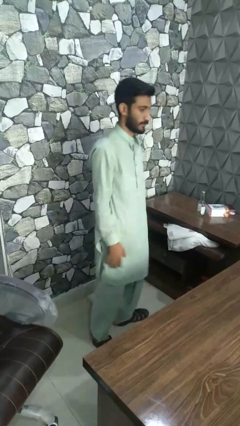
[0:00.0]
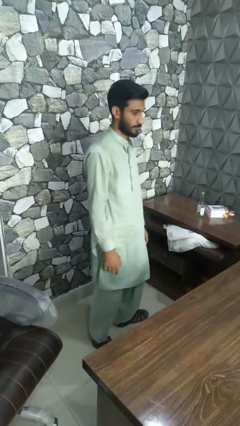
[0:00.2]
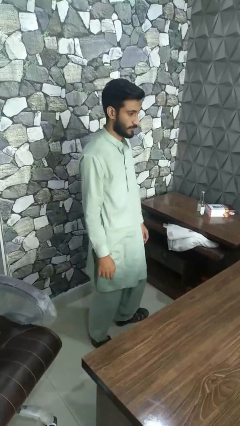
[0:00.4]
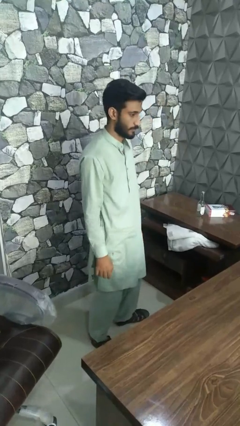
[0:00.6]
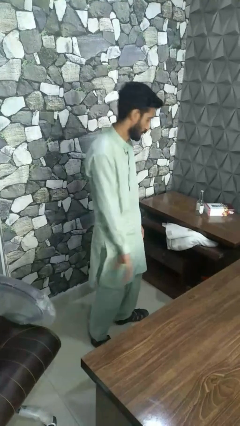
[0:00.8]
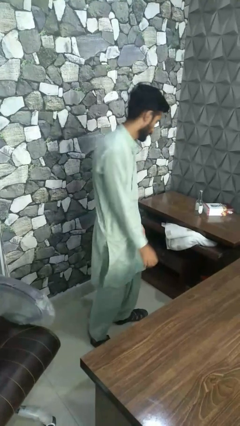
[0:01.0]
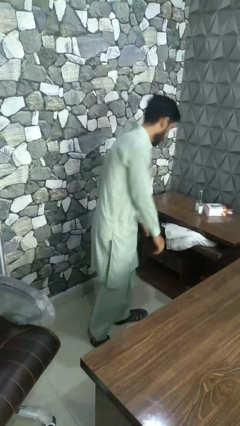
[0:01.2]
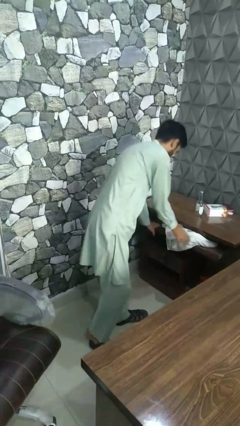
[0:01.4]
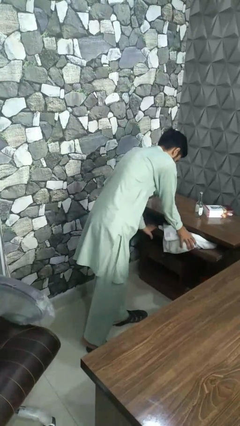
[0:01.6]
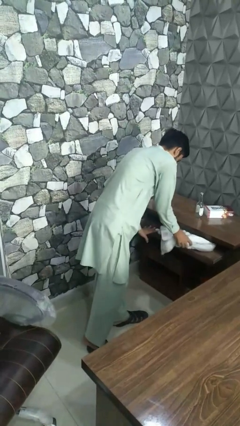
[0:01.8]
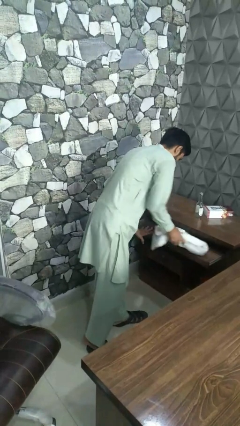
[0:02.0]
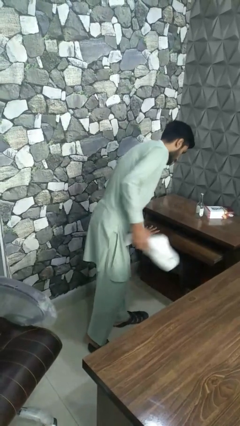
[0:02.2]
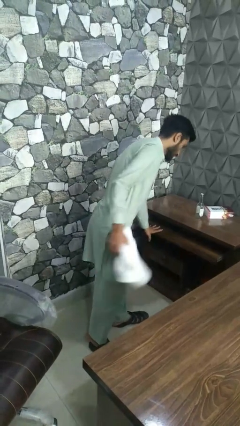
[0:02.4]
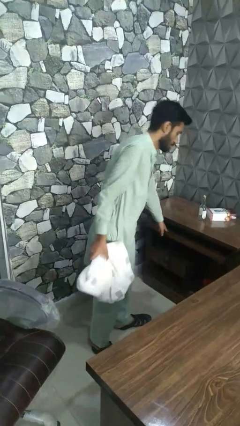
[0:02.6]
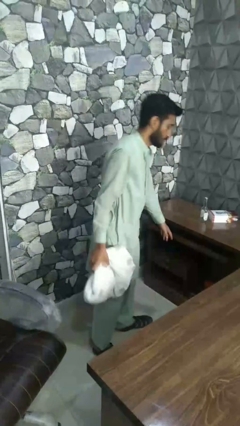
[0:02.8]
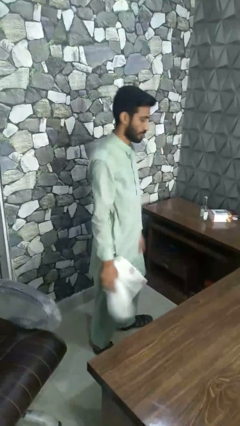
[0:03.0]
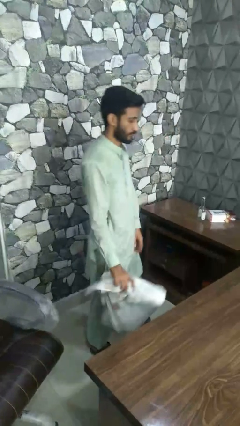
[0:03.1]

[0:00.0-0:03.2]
person takes clothes from dresser

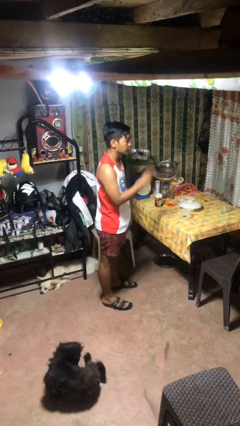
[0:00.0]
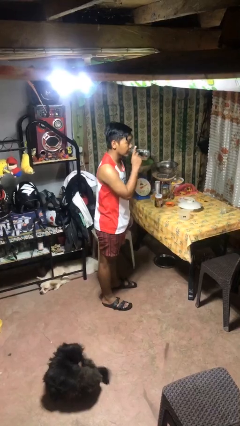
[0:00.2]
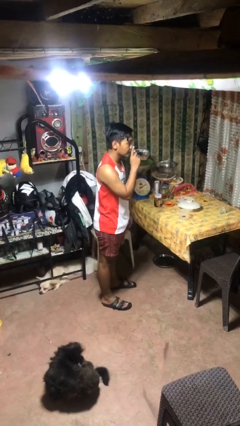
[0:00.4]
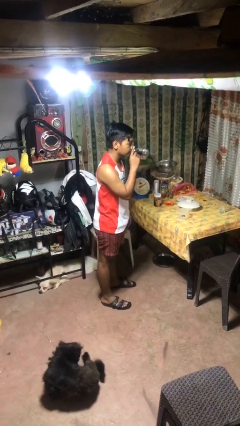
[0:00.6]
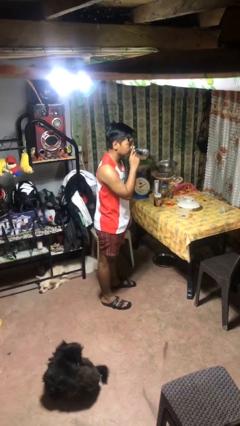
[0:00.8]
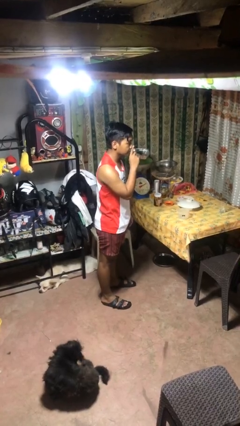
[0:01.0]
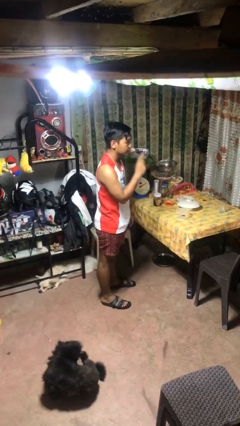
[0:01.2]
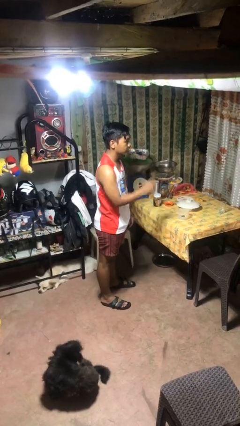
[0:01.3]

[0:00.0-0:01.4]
person gestures be quiet

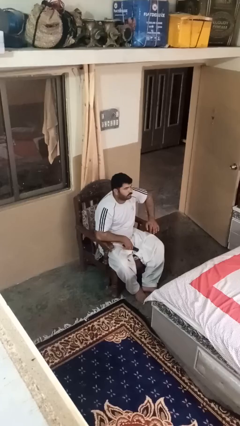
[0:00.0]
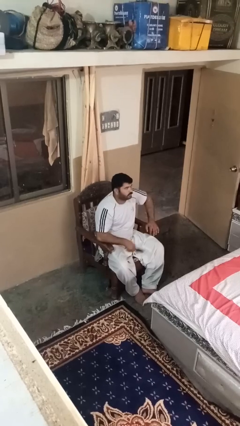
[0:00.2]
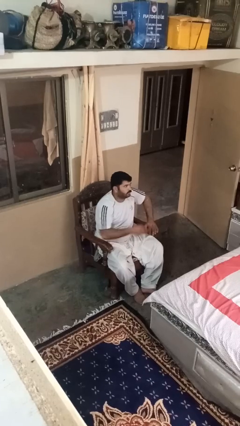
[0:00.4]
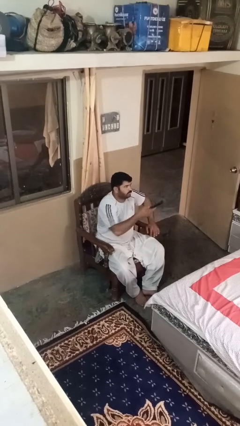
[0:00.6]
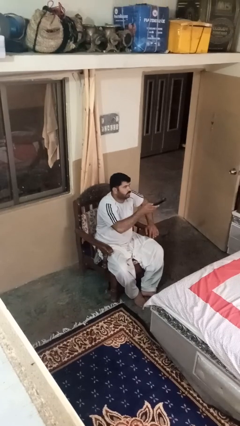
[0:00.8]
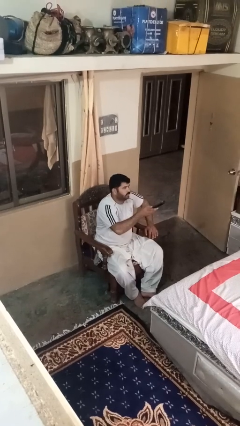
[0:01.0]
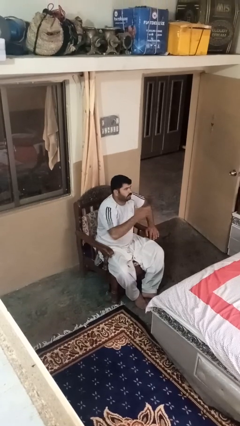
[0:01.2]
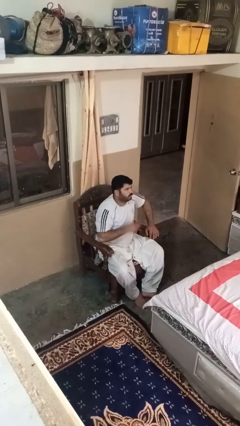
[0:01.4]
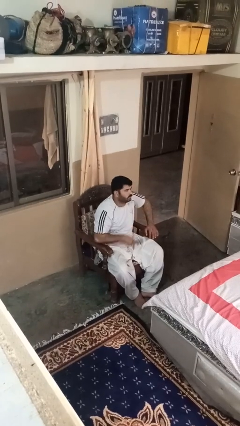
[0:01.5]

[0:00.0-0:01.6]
person uses television remote

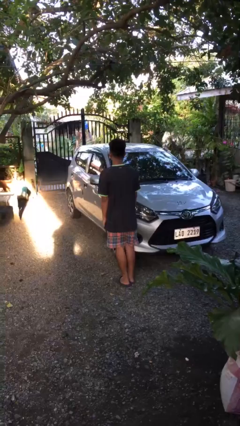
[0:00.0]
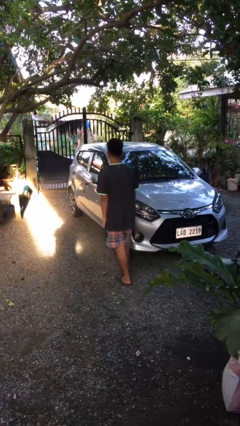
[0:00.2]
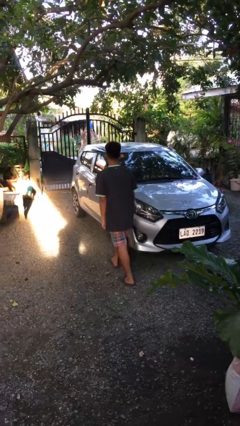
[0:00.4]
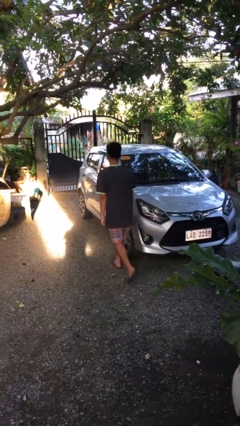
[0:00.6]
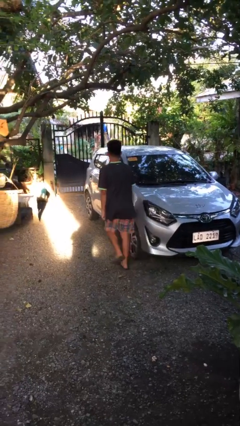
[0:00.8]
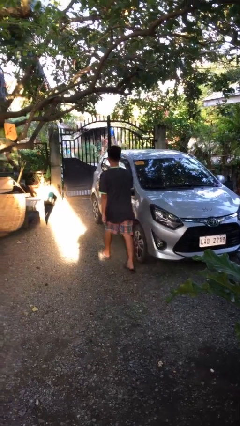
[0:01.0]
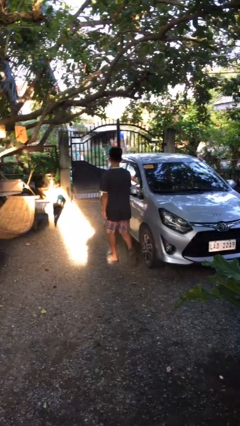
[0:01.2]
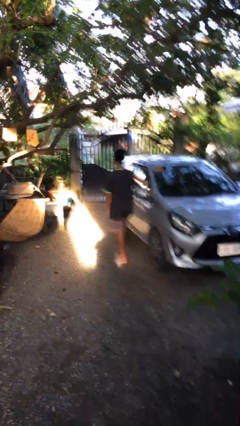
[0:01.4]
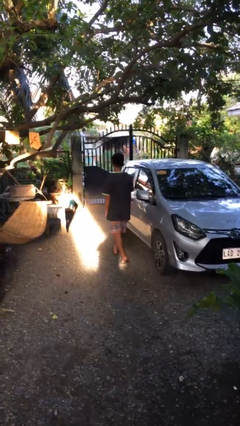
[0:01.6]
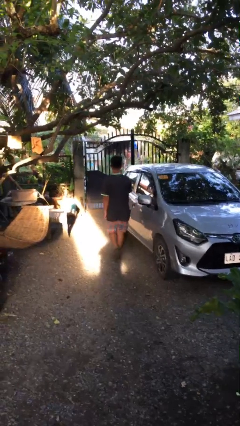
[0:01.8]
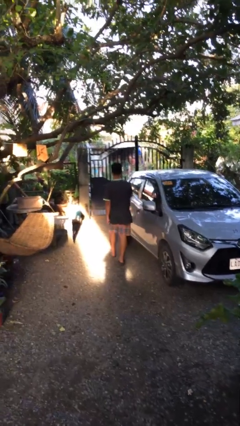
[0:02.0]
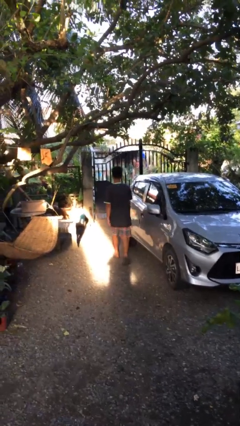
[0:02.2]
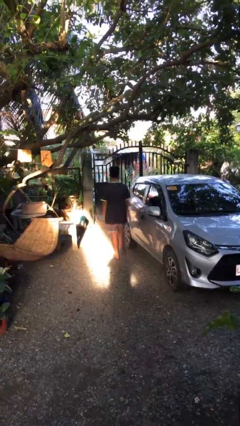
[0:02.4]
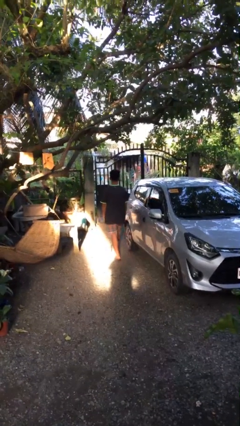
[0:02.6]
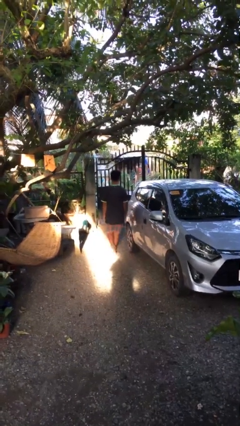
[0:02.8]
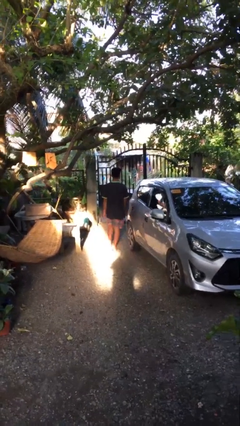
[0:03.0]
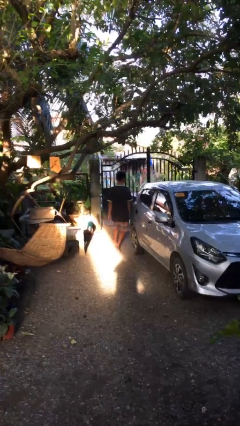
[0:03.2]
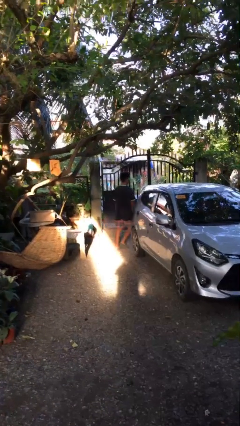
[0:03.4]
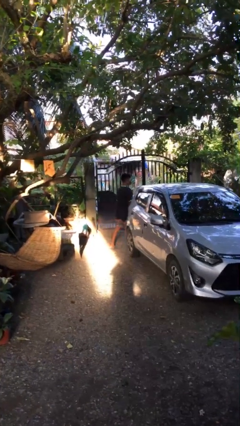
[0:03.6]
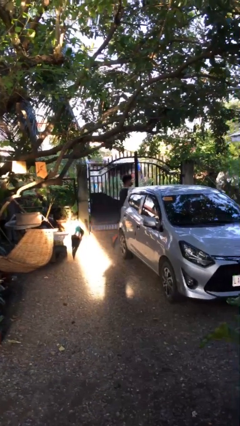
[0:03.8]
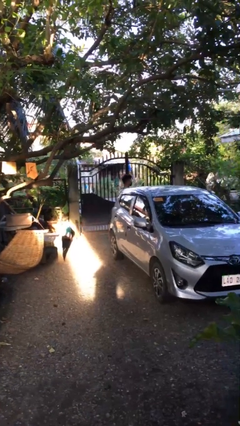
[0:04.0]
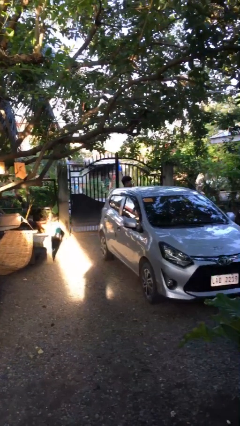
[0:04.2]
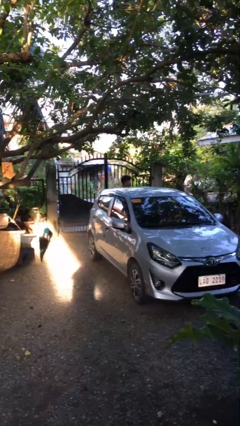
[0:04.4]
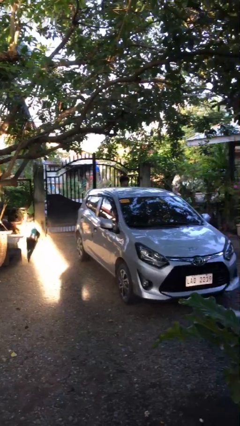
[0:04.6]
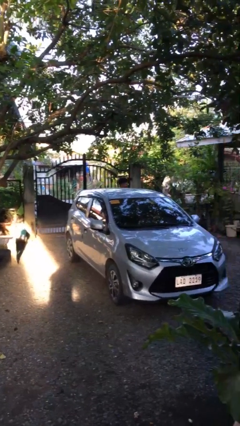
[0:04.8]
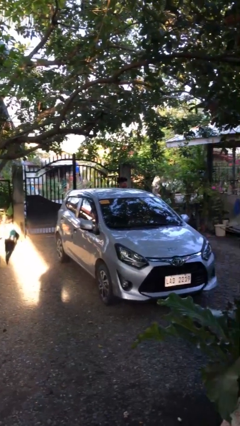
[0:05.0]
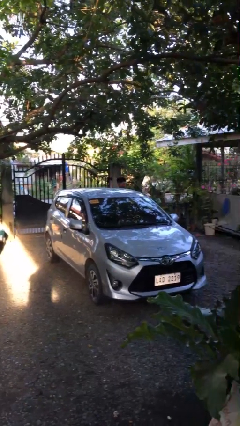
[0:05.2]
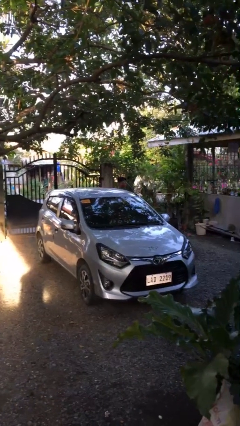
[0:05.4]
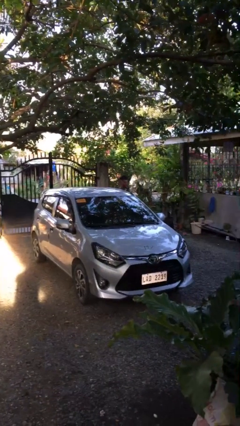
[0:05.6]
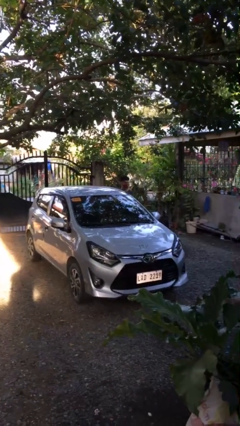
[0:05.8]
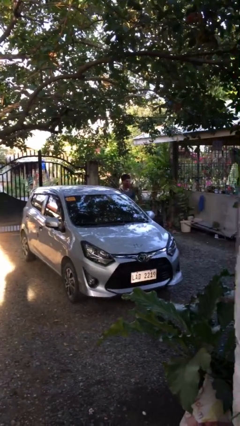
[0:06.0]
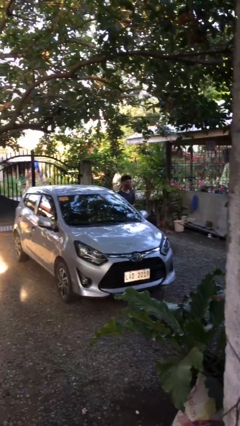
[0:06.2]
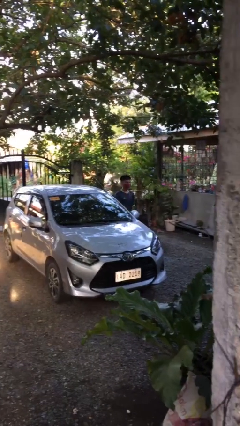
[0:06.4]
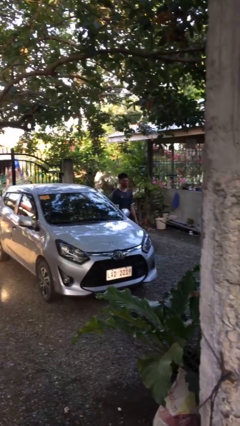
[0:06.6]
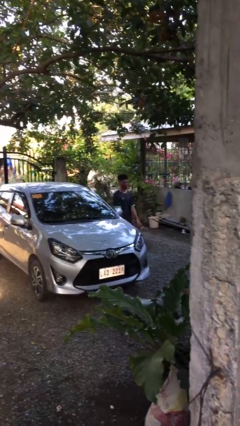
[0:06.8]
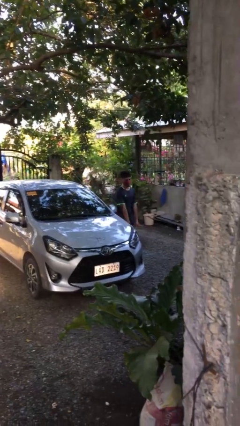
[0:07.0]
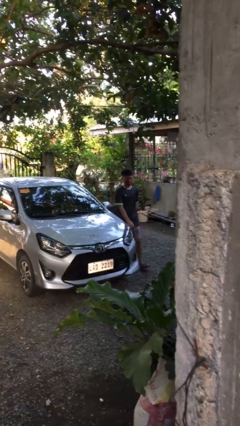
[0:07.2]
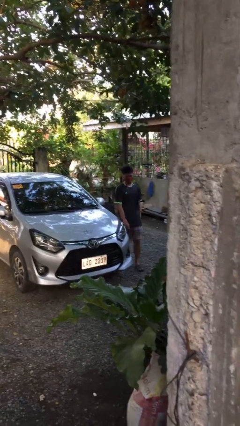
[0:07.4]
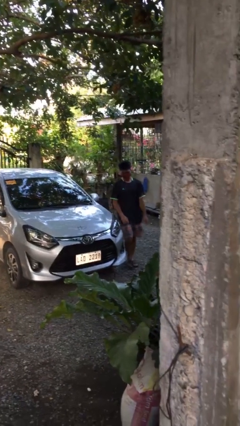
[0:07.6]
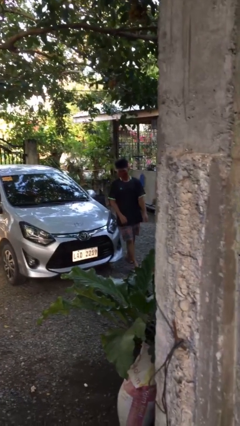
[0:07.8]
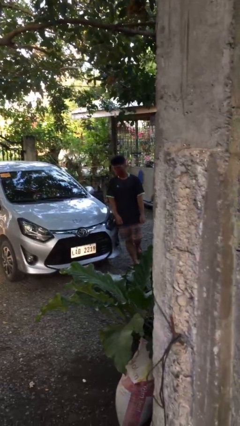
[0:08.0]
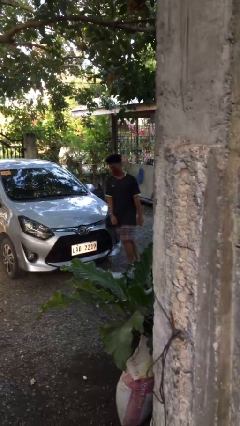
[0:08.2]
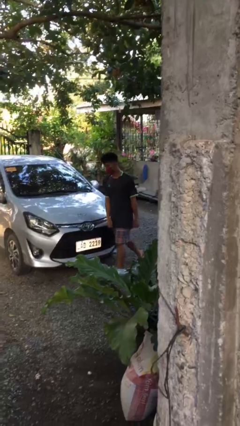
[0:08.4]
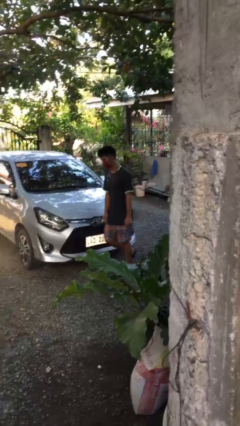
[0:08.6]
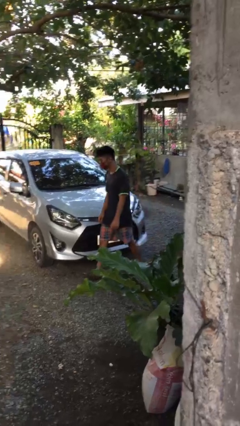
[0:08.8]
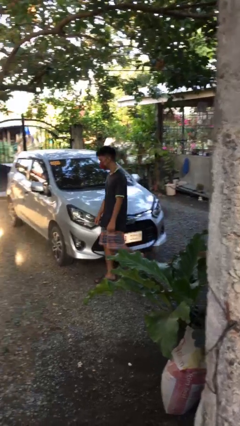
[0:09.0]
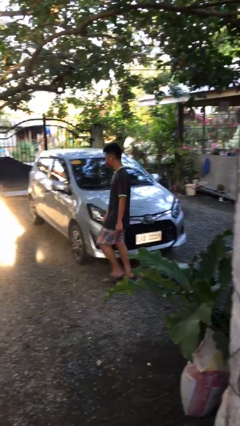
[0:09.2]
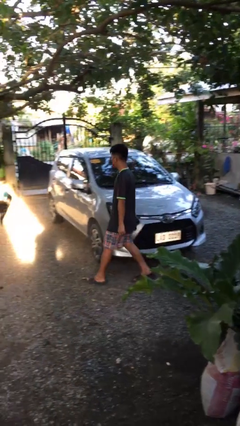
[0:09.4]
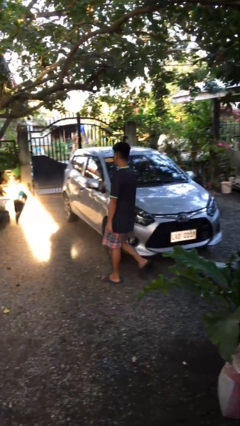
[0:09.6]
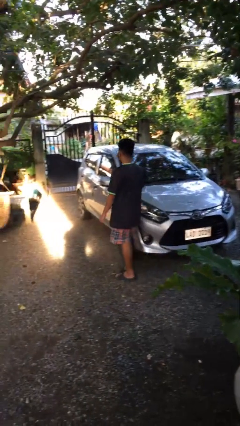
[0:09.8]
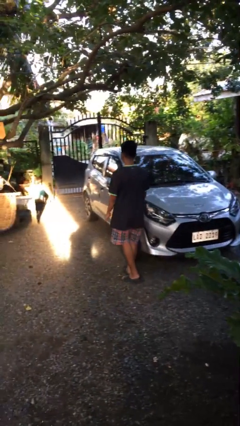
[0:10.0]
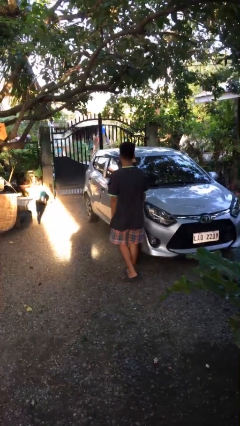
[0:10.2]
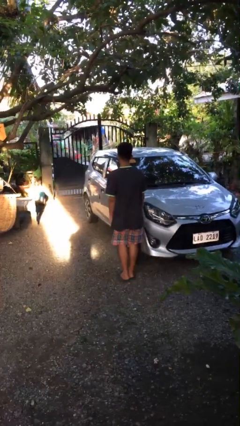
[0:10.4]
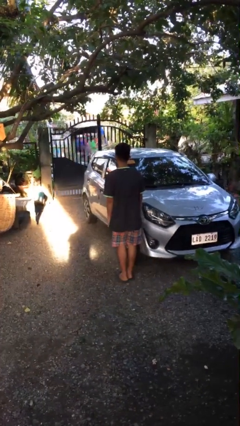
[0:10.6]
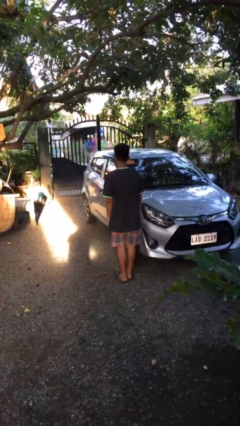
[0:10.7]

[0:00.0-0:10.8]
person walks around car

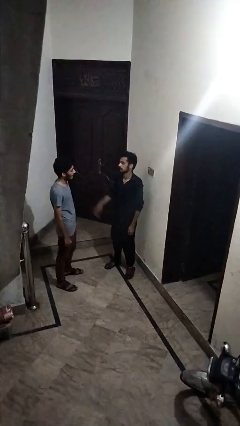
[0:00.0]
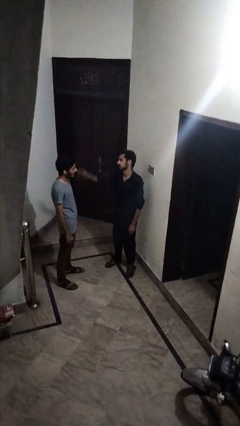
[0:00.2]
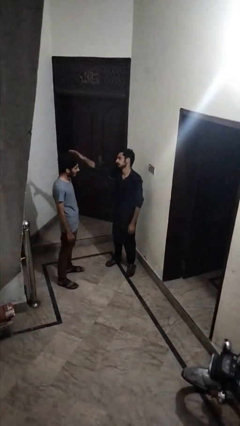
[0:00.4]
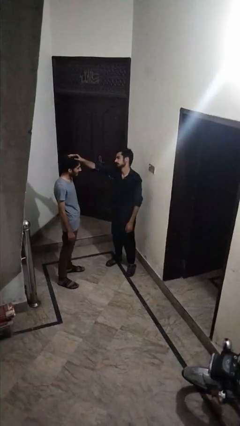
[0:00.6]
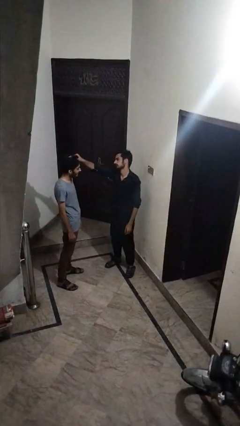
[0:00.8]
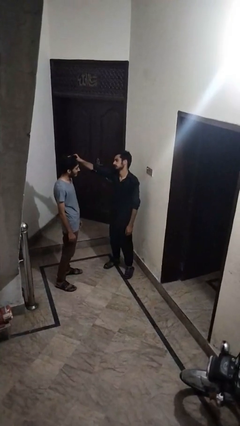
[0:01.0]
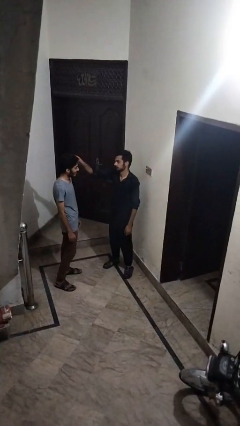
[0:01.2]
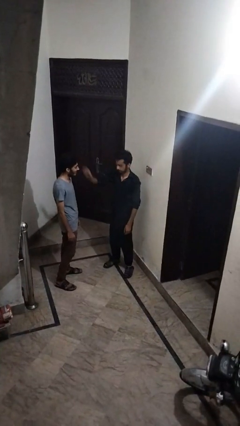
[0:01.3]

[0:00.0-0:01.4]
person grabs person by hair
